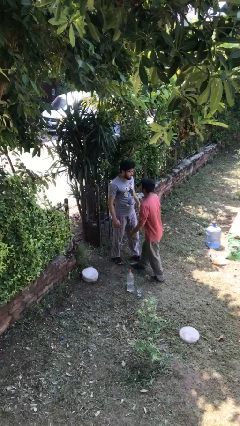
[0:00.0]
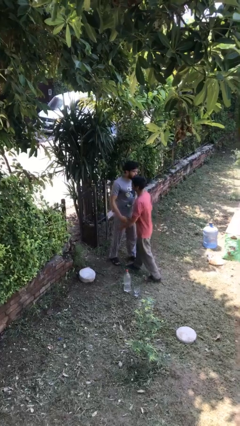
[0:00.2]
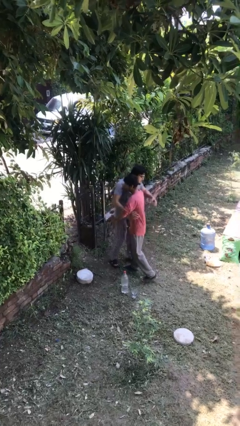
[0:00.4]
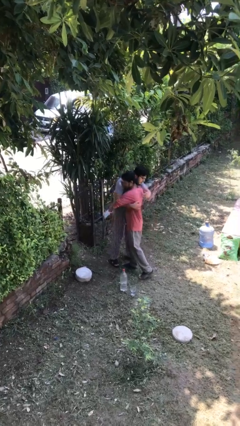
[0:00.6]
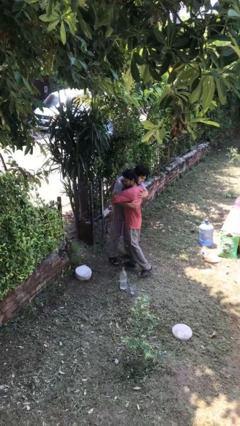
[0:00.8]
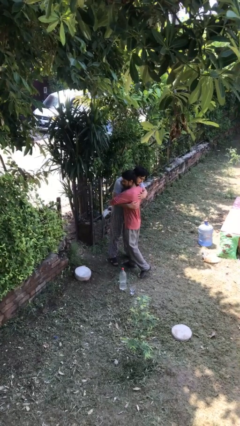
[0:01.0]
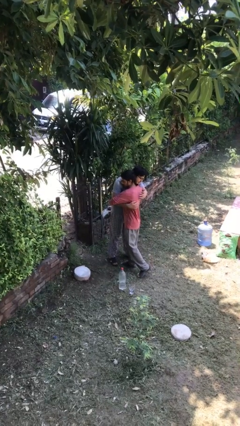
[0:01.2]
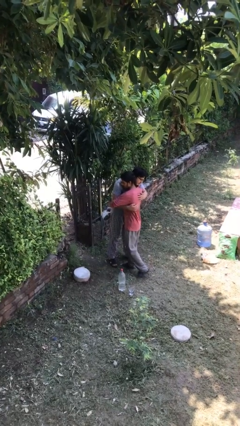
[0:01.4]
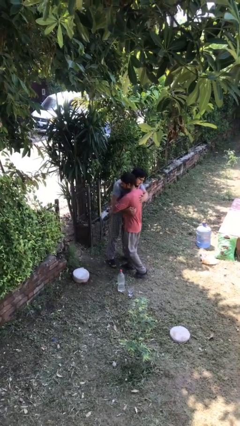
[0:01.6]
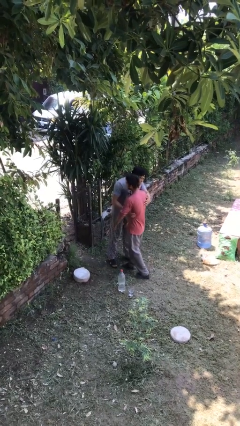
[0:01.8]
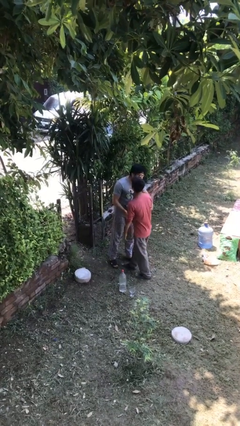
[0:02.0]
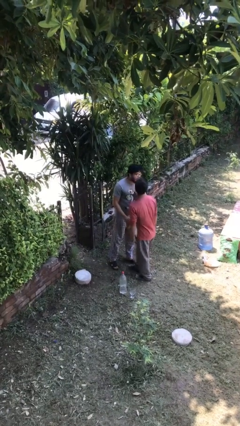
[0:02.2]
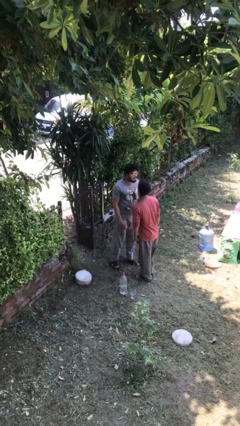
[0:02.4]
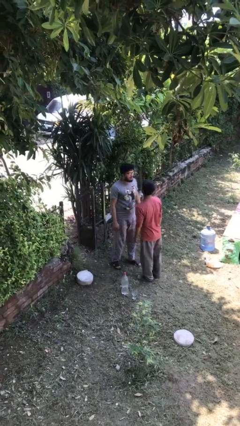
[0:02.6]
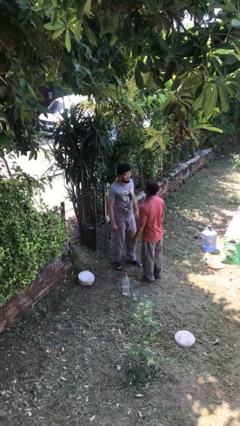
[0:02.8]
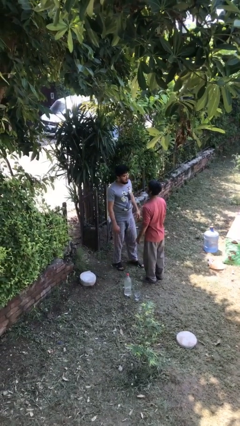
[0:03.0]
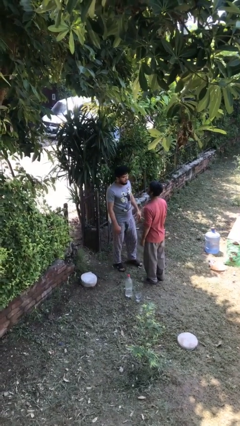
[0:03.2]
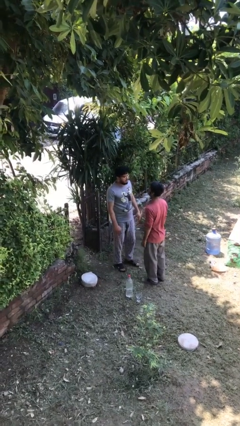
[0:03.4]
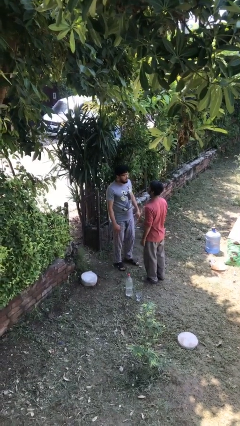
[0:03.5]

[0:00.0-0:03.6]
person embraces person

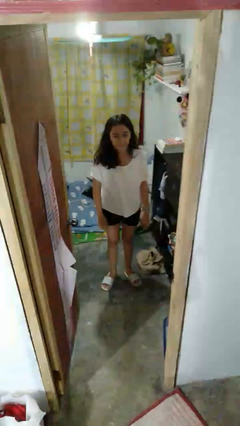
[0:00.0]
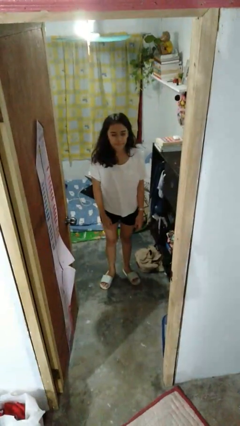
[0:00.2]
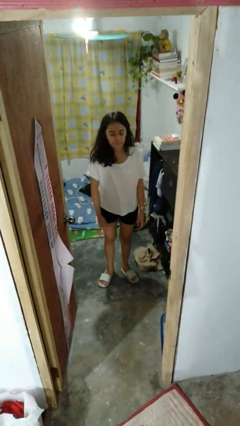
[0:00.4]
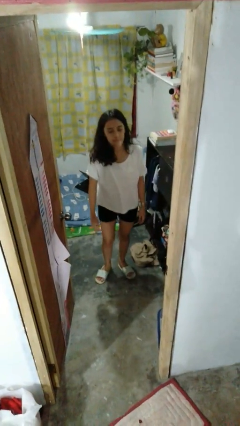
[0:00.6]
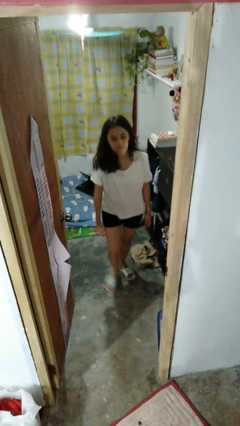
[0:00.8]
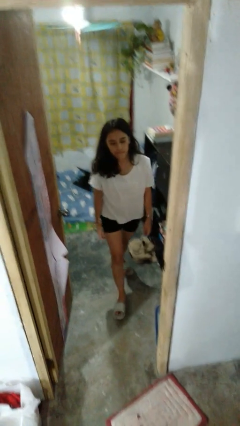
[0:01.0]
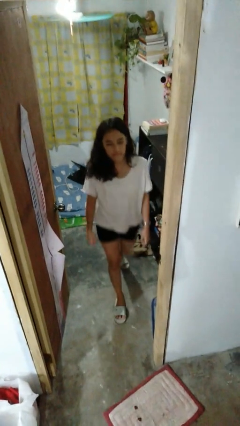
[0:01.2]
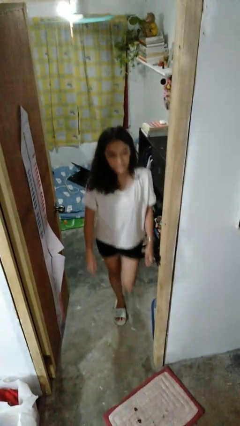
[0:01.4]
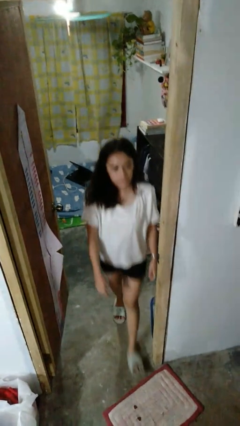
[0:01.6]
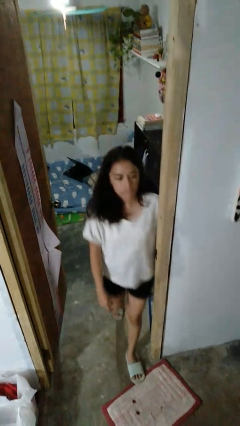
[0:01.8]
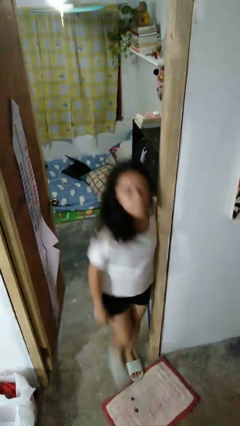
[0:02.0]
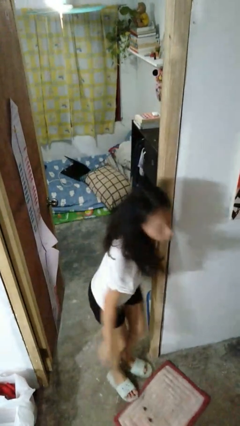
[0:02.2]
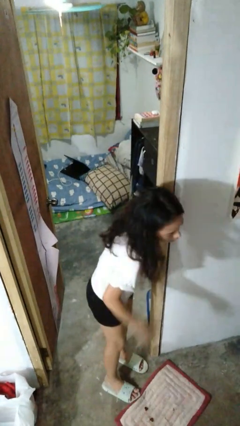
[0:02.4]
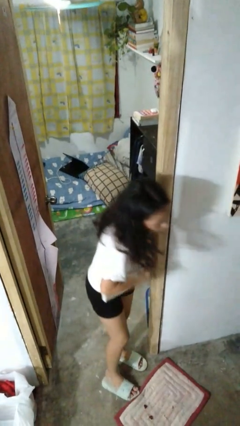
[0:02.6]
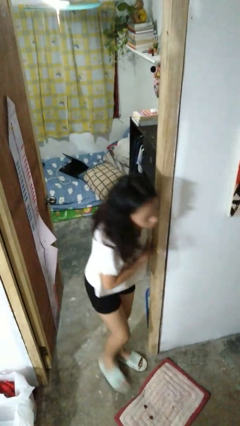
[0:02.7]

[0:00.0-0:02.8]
person bumps into wall

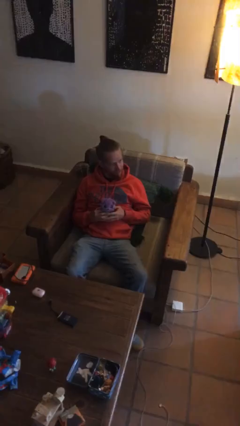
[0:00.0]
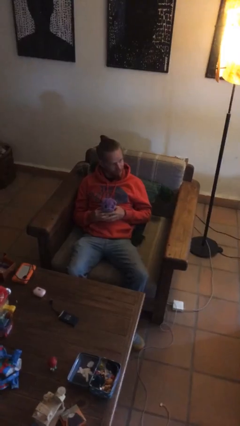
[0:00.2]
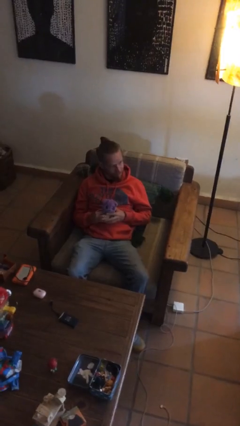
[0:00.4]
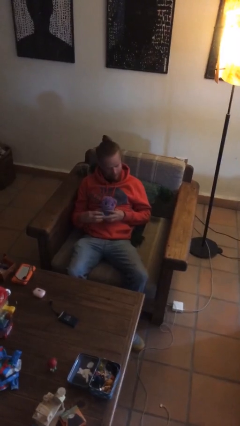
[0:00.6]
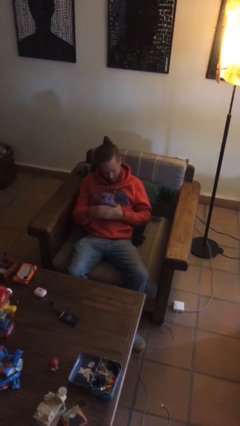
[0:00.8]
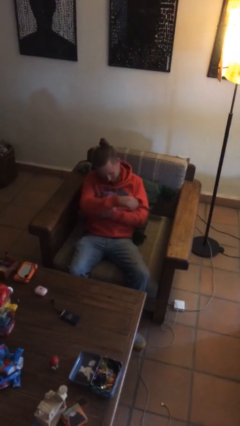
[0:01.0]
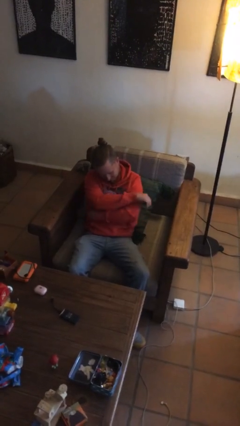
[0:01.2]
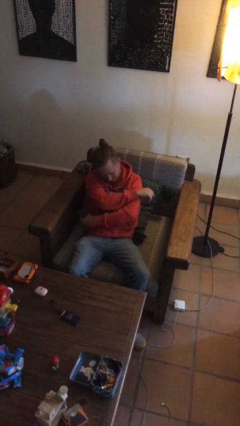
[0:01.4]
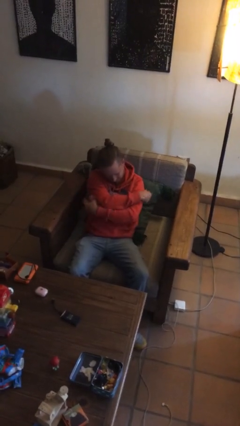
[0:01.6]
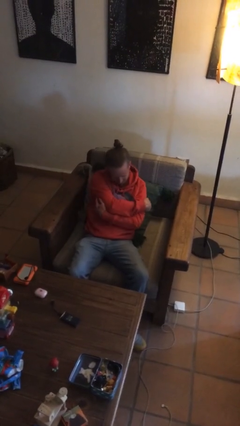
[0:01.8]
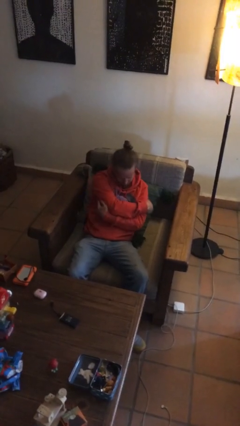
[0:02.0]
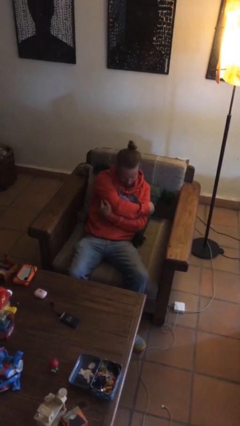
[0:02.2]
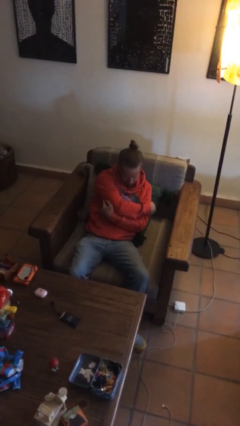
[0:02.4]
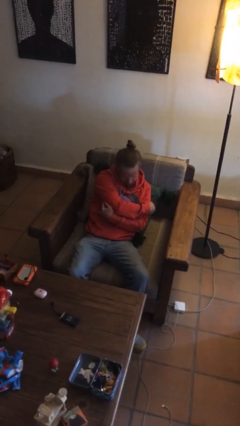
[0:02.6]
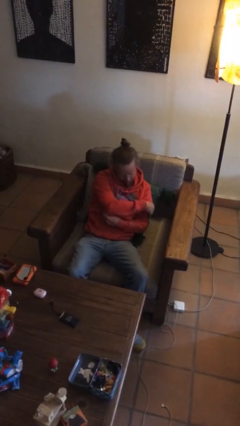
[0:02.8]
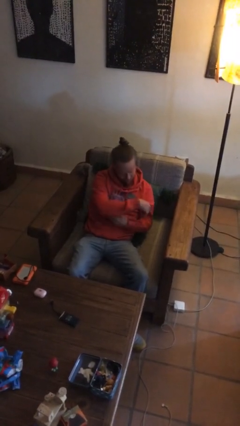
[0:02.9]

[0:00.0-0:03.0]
person hugs stuffed animal

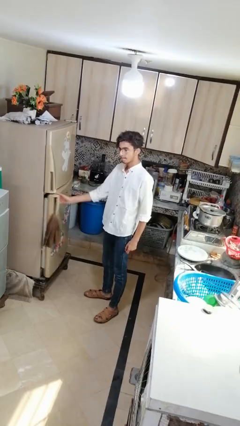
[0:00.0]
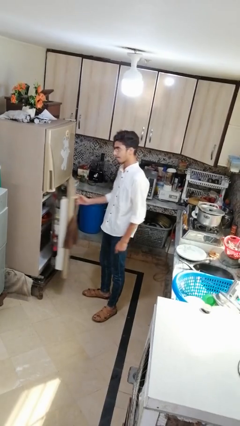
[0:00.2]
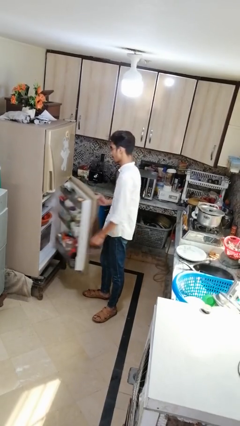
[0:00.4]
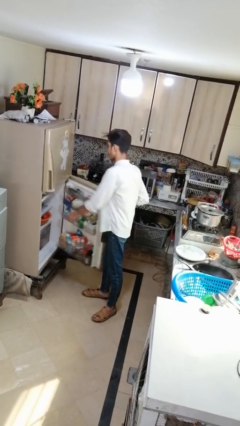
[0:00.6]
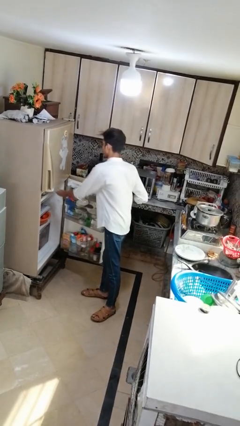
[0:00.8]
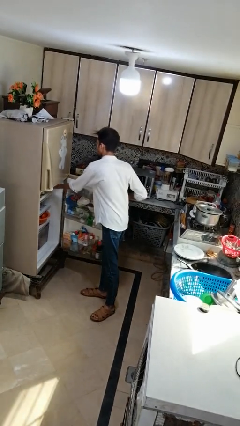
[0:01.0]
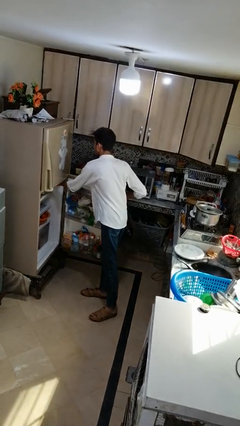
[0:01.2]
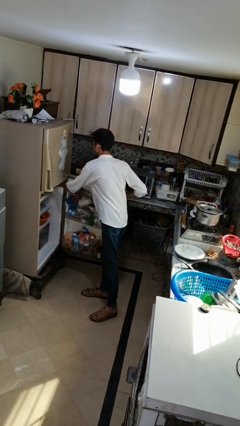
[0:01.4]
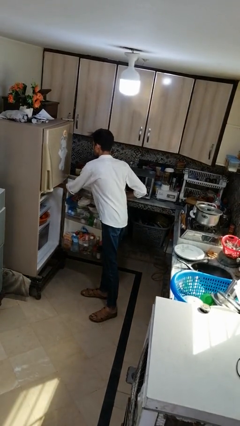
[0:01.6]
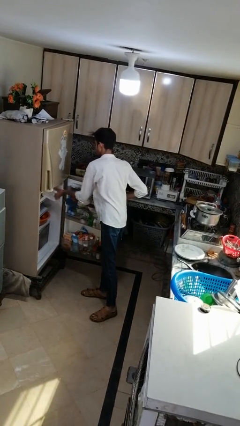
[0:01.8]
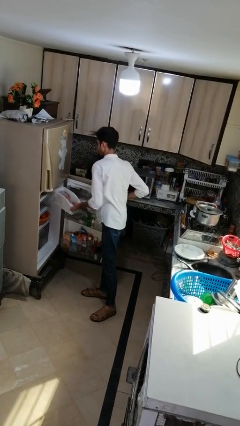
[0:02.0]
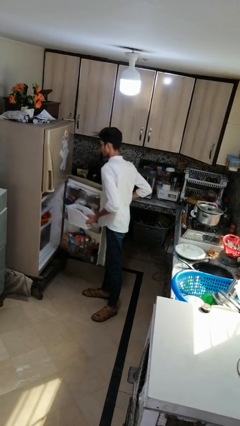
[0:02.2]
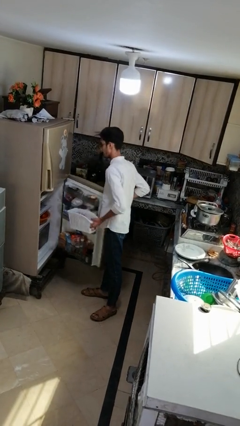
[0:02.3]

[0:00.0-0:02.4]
person takes object from refrigerator

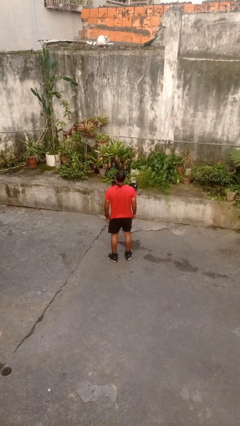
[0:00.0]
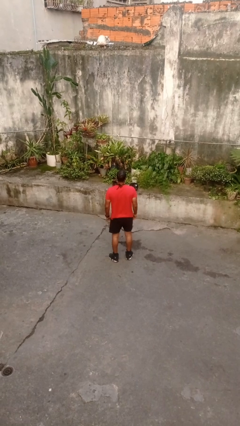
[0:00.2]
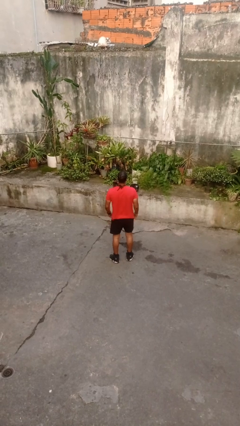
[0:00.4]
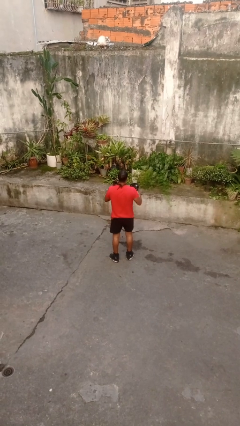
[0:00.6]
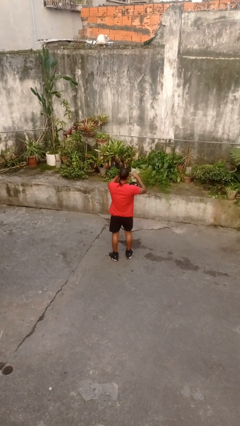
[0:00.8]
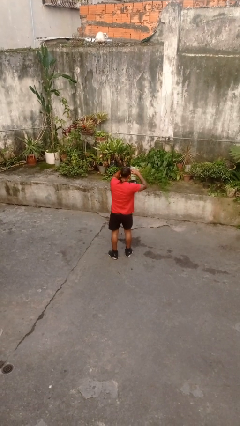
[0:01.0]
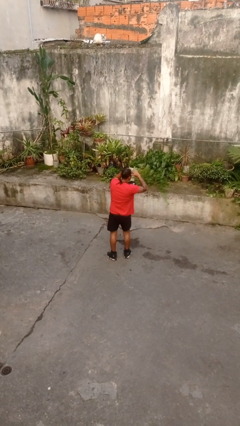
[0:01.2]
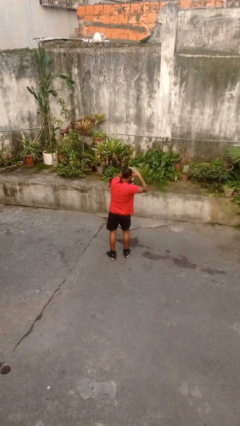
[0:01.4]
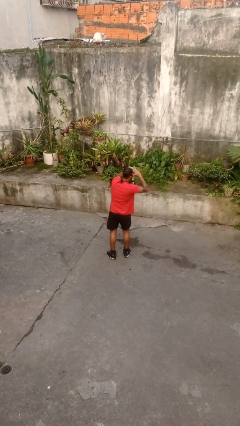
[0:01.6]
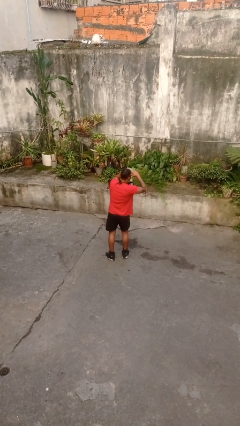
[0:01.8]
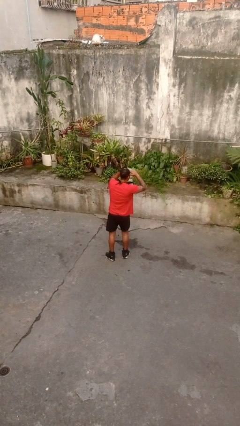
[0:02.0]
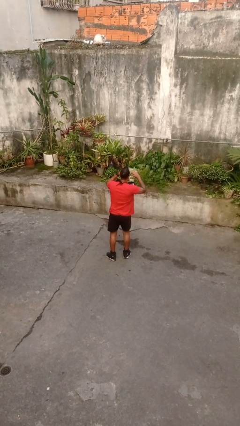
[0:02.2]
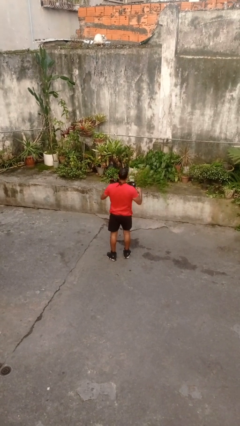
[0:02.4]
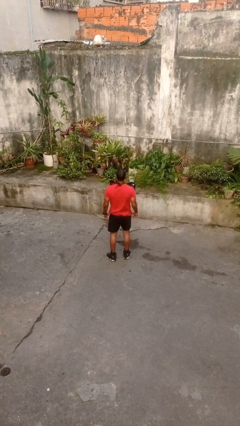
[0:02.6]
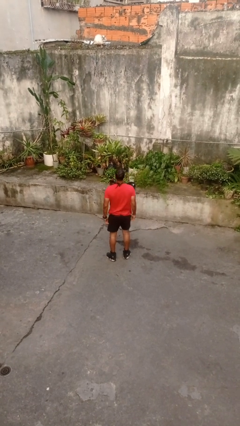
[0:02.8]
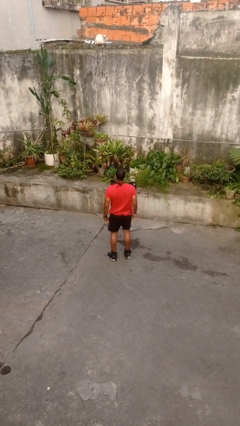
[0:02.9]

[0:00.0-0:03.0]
person shades eyes

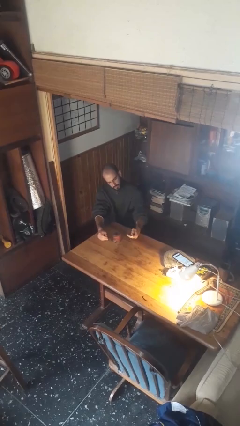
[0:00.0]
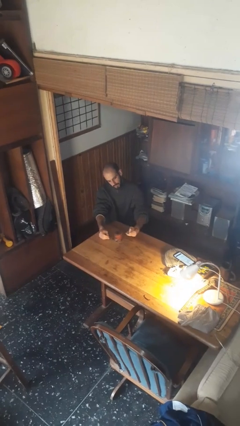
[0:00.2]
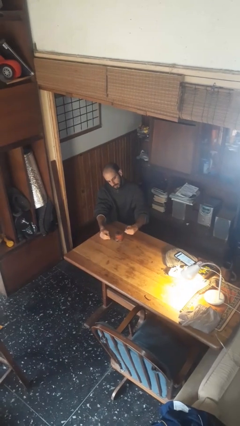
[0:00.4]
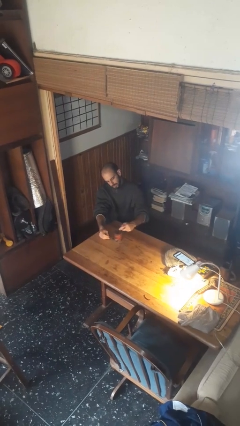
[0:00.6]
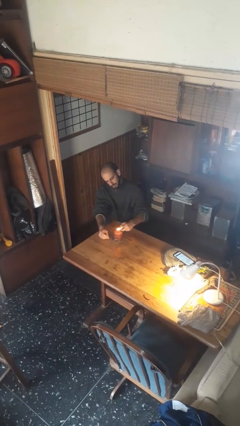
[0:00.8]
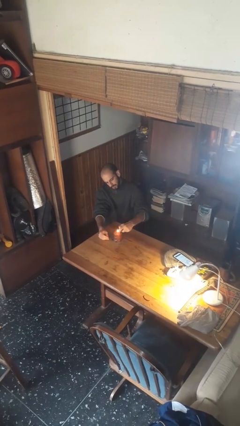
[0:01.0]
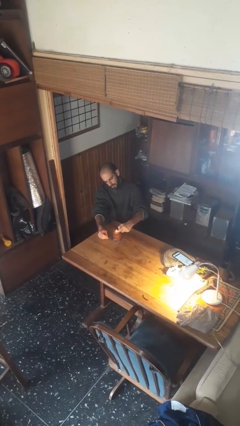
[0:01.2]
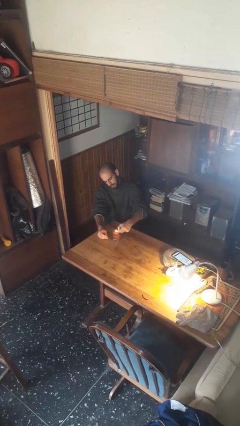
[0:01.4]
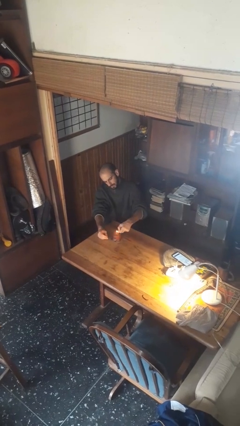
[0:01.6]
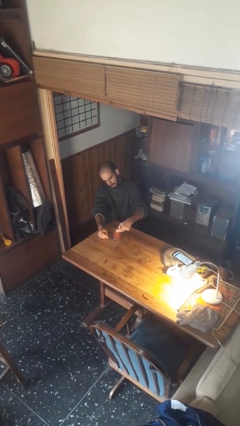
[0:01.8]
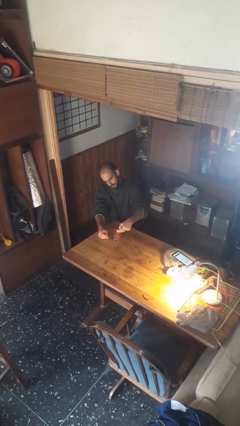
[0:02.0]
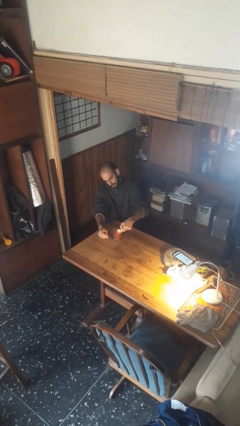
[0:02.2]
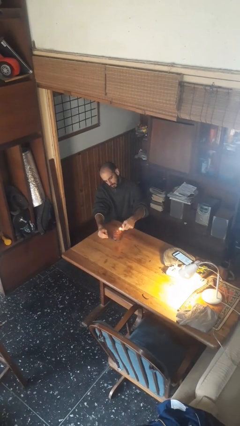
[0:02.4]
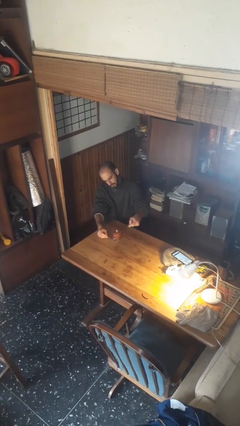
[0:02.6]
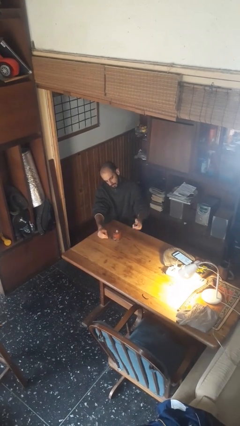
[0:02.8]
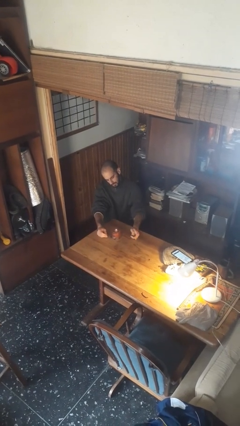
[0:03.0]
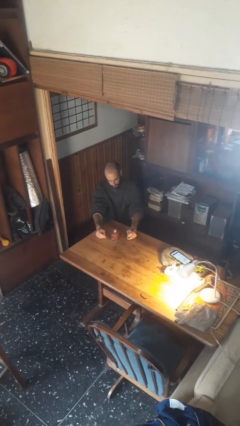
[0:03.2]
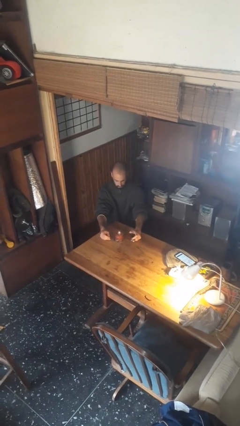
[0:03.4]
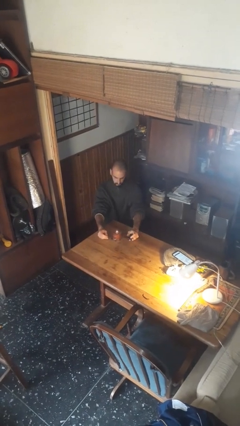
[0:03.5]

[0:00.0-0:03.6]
person lights candle
